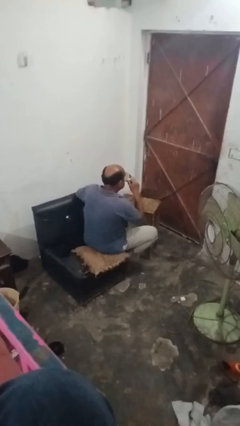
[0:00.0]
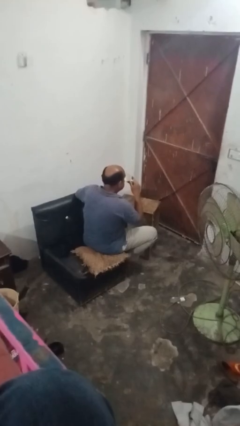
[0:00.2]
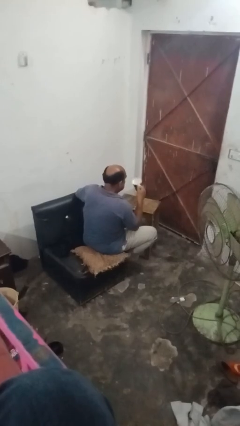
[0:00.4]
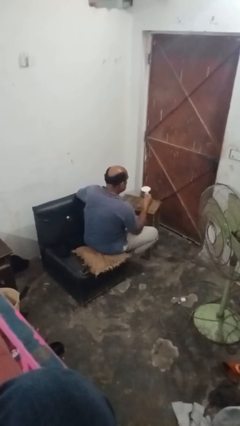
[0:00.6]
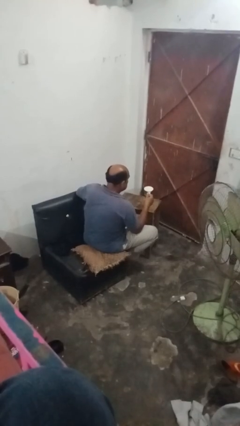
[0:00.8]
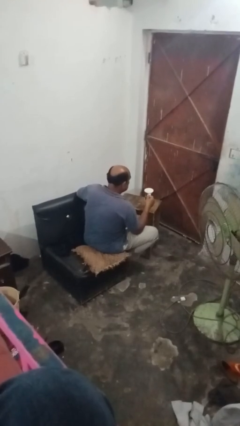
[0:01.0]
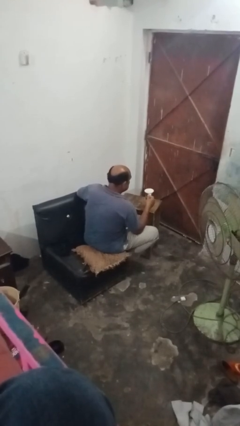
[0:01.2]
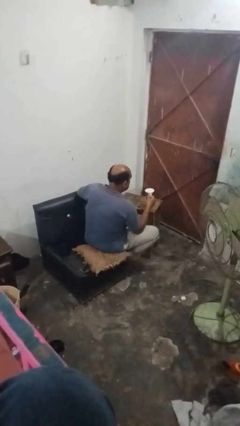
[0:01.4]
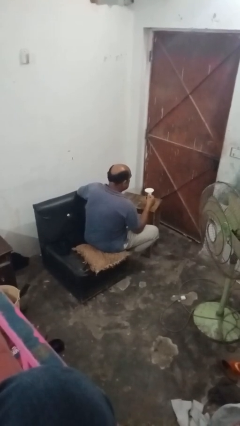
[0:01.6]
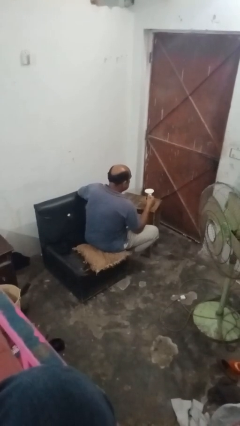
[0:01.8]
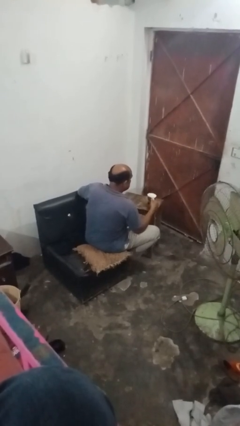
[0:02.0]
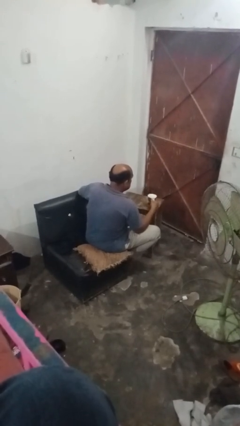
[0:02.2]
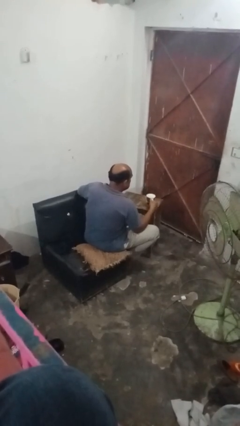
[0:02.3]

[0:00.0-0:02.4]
person puts down object on table

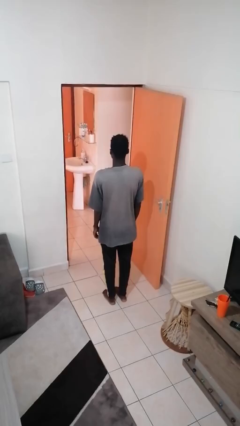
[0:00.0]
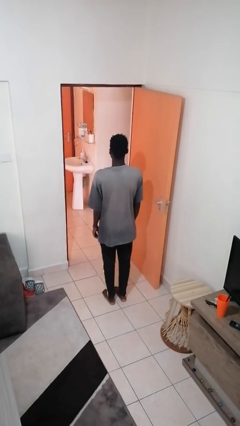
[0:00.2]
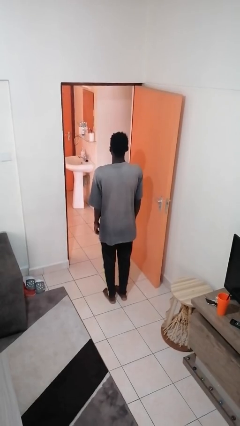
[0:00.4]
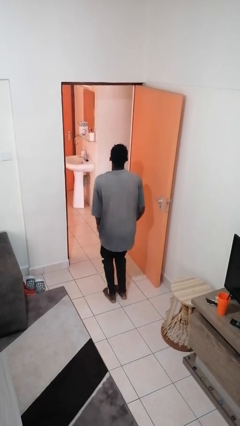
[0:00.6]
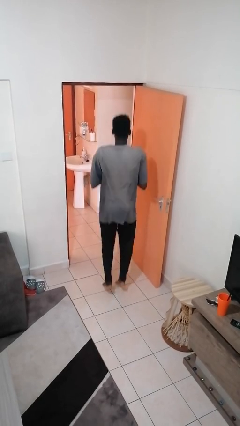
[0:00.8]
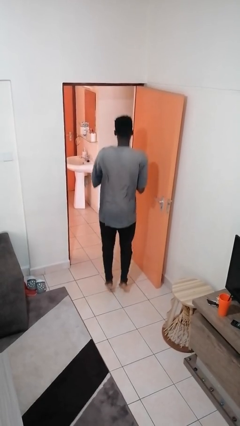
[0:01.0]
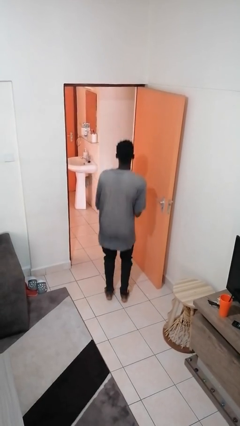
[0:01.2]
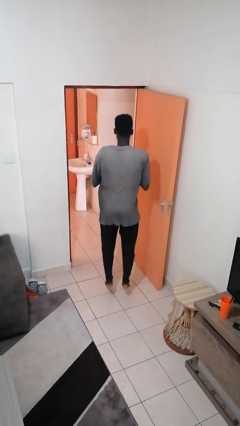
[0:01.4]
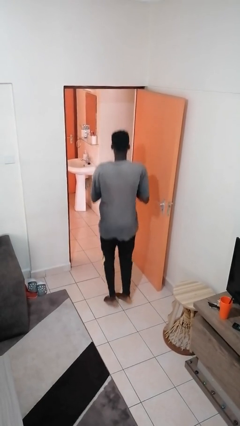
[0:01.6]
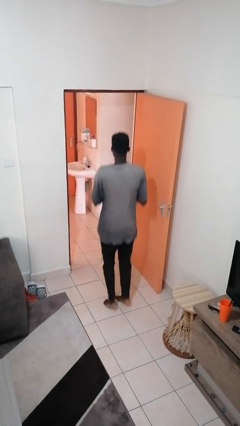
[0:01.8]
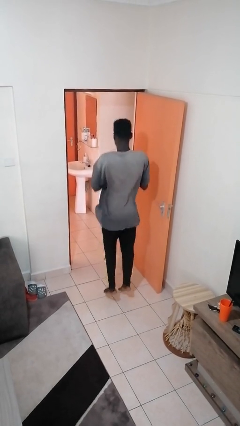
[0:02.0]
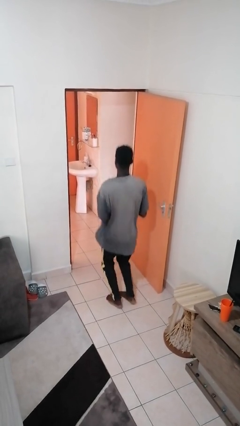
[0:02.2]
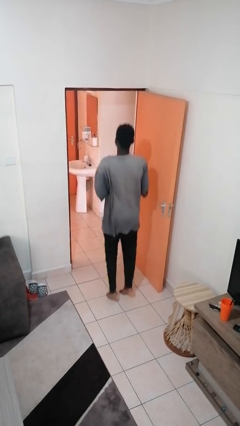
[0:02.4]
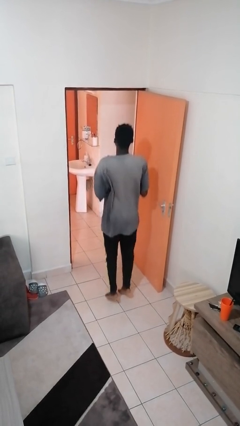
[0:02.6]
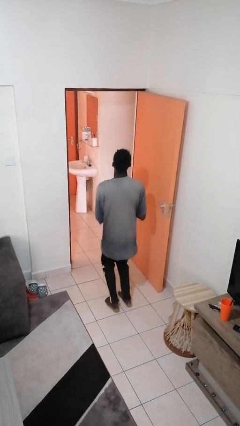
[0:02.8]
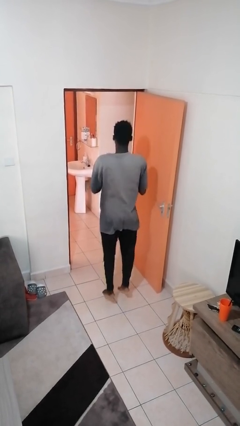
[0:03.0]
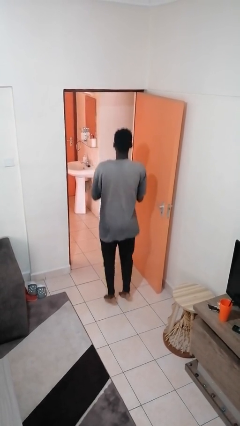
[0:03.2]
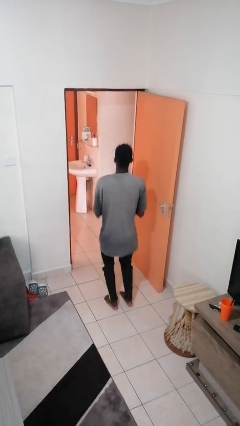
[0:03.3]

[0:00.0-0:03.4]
person jumps

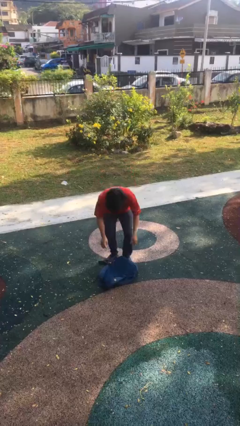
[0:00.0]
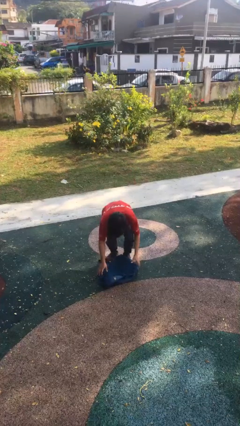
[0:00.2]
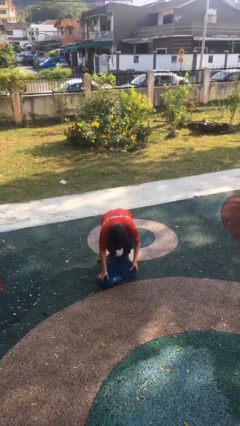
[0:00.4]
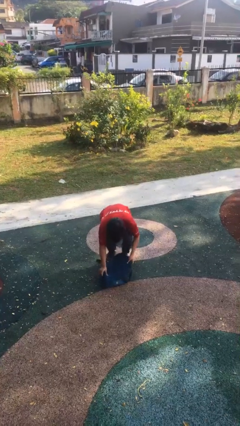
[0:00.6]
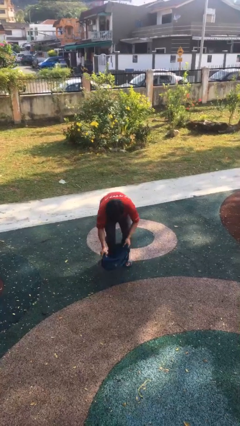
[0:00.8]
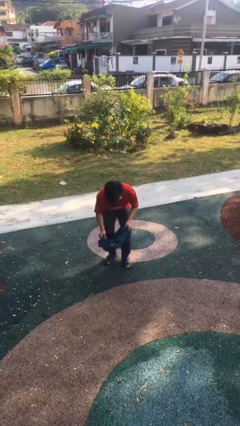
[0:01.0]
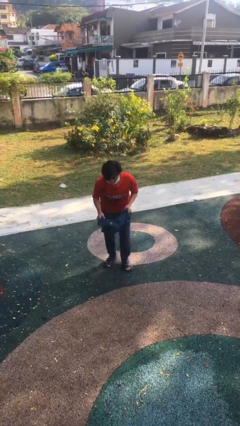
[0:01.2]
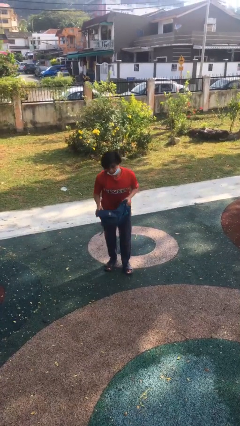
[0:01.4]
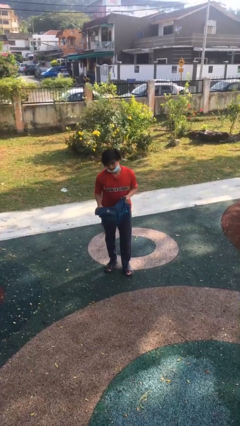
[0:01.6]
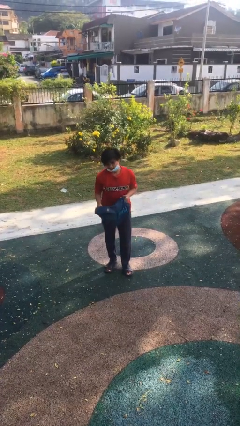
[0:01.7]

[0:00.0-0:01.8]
person picks up object from floor

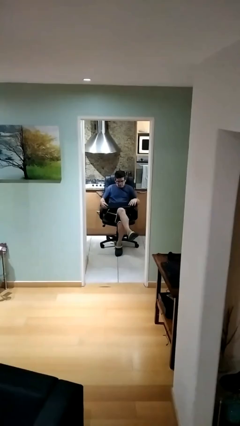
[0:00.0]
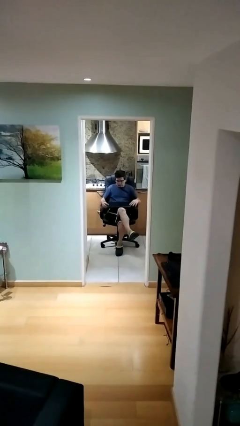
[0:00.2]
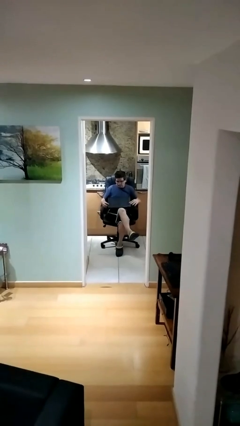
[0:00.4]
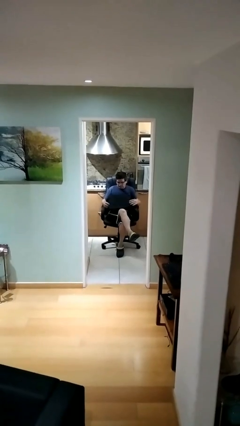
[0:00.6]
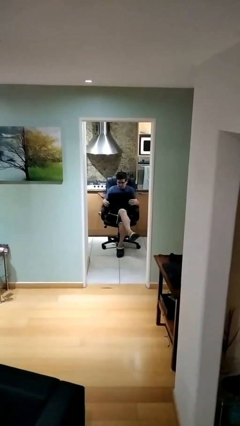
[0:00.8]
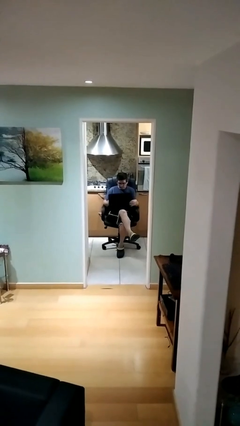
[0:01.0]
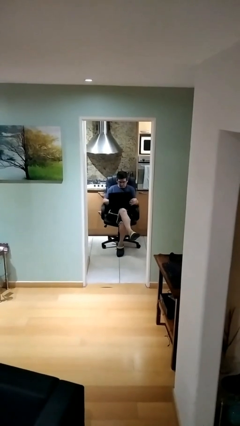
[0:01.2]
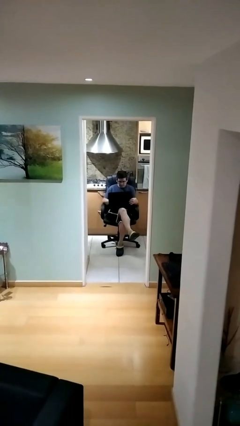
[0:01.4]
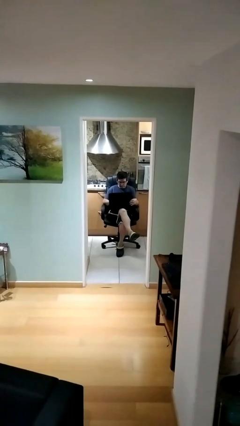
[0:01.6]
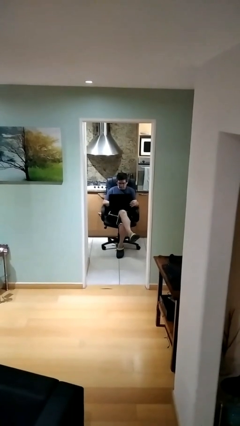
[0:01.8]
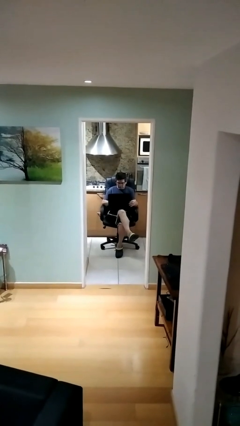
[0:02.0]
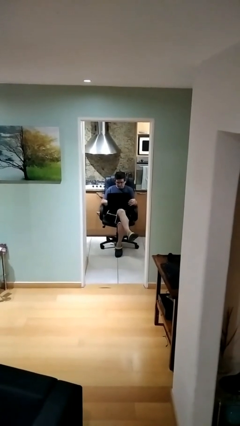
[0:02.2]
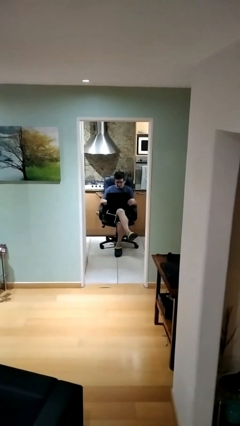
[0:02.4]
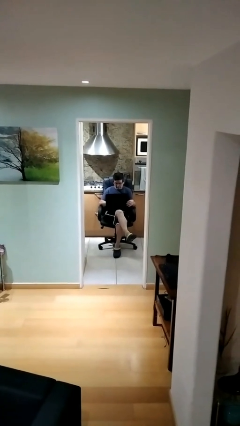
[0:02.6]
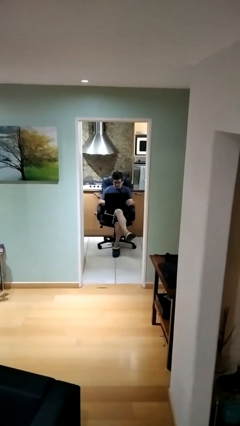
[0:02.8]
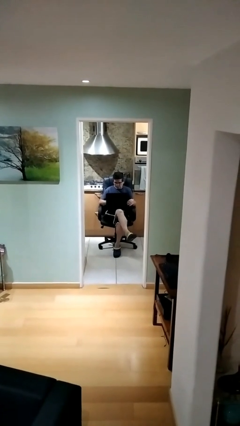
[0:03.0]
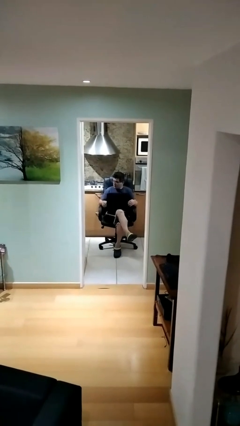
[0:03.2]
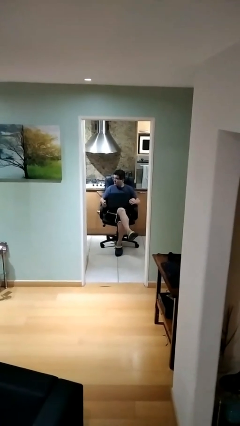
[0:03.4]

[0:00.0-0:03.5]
person interacts with laptop

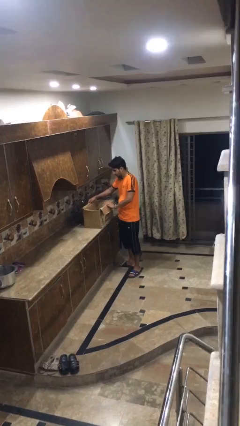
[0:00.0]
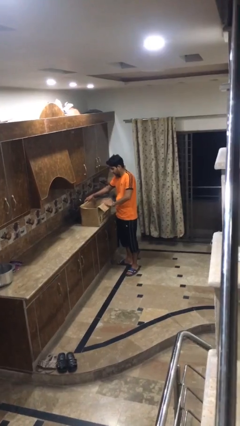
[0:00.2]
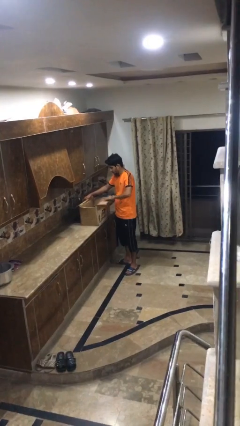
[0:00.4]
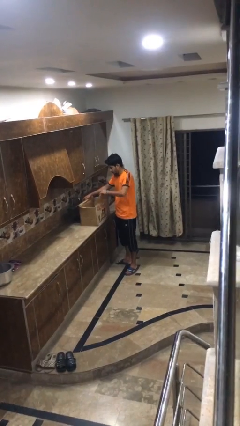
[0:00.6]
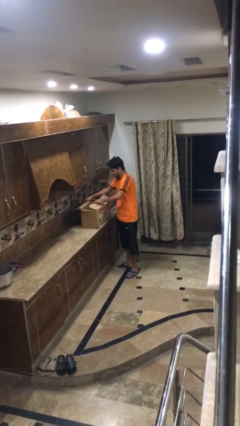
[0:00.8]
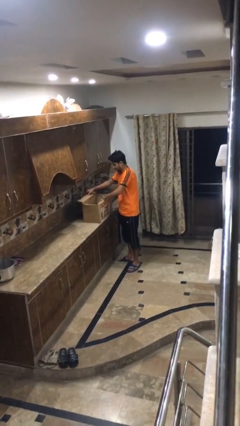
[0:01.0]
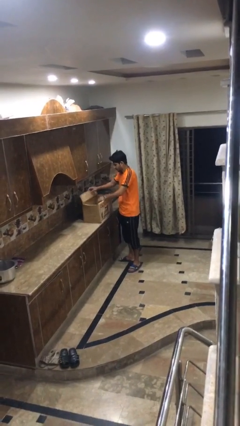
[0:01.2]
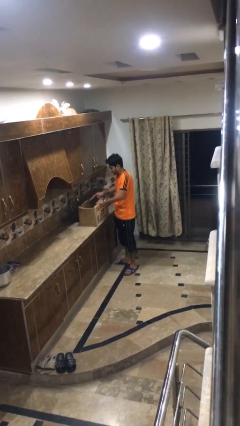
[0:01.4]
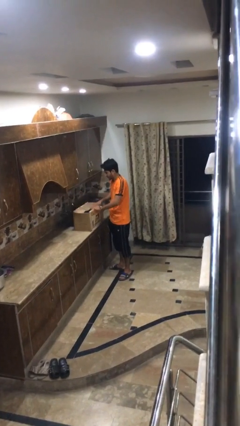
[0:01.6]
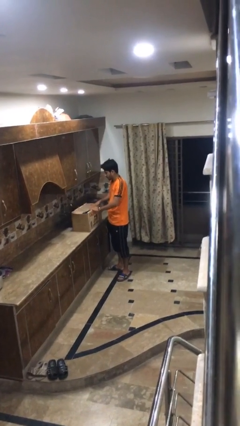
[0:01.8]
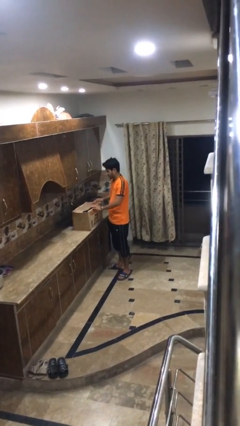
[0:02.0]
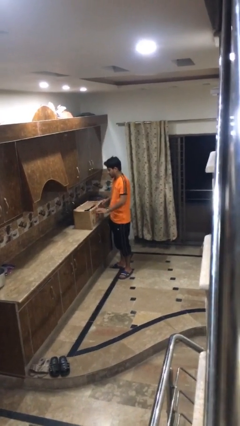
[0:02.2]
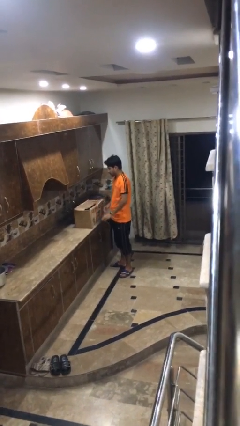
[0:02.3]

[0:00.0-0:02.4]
person closes box

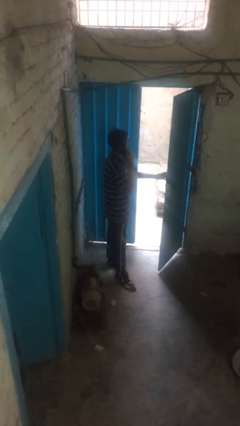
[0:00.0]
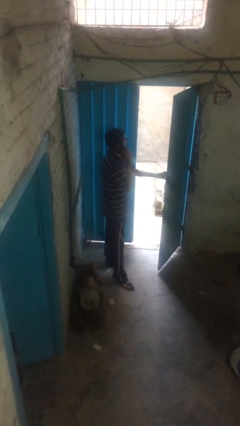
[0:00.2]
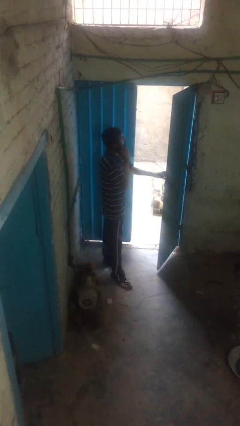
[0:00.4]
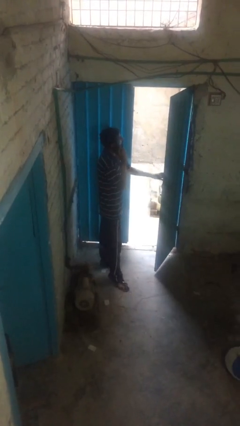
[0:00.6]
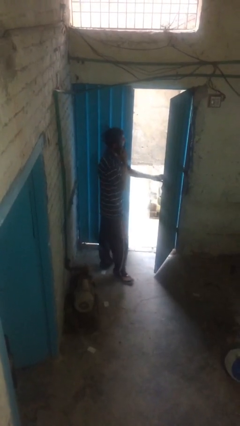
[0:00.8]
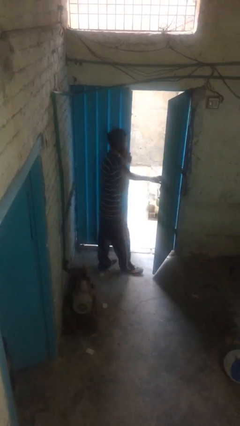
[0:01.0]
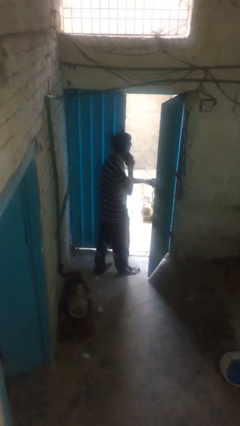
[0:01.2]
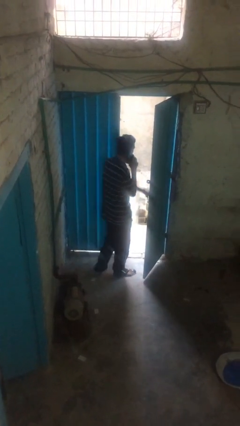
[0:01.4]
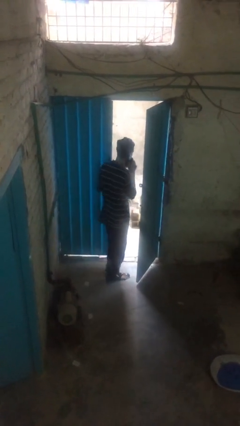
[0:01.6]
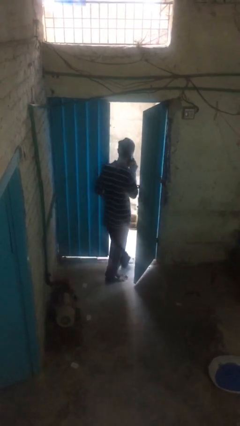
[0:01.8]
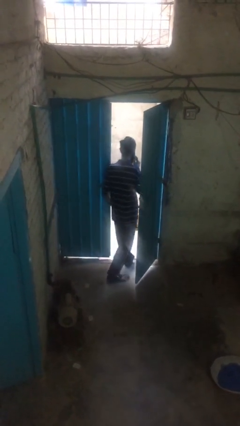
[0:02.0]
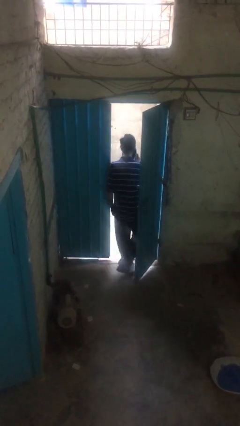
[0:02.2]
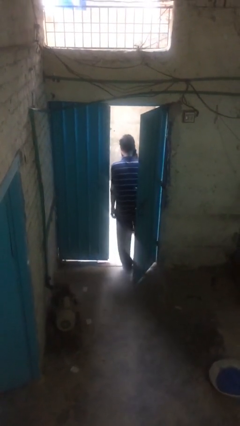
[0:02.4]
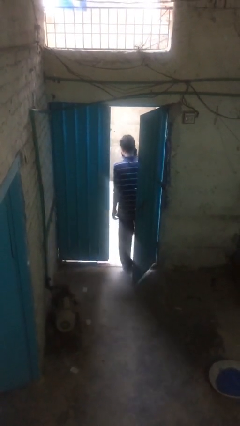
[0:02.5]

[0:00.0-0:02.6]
person exits scene through structure

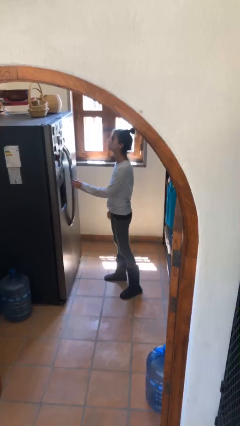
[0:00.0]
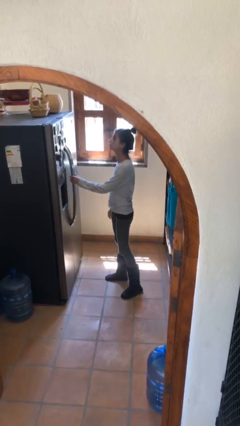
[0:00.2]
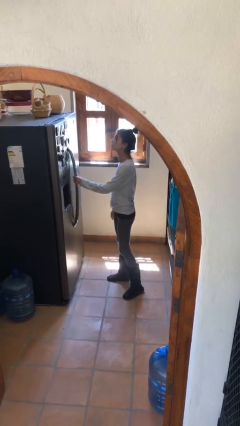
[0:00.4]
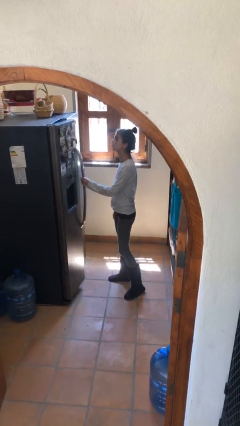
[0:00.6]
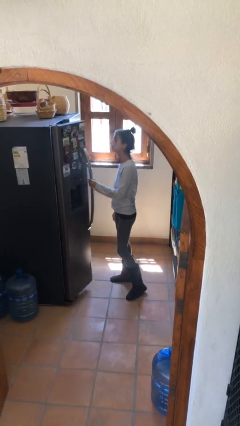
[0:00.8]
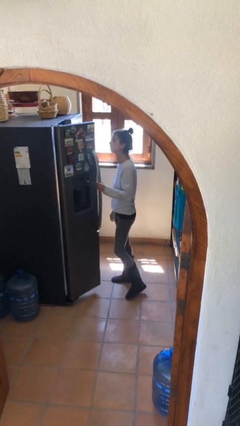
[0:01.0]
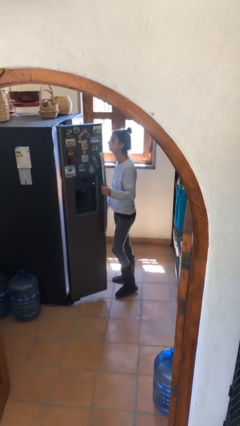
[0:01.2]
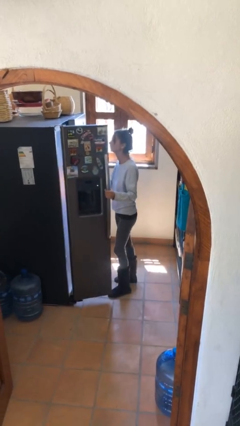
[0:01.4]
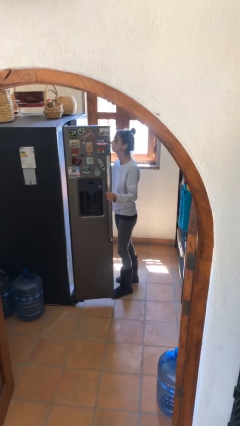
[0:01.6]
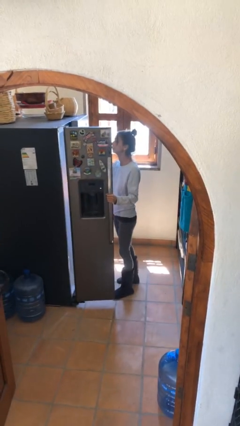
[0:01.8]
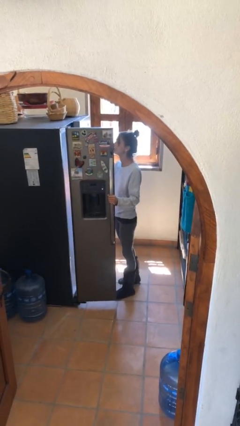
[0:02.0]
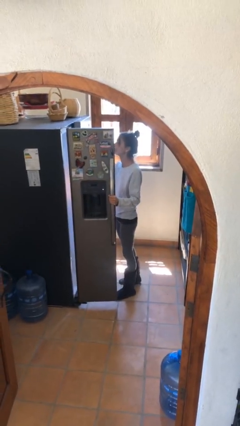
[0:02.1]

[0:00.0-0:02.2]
person opens refrigerator
